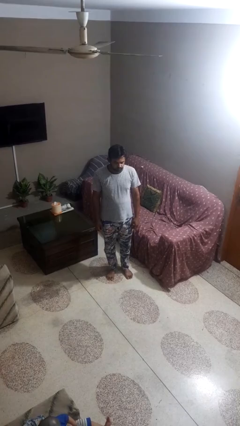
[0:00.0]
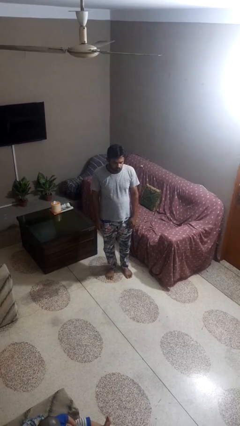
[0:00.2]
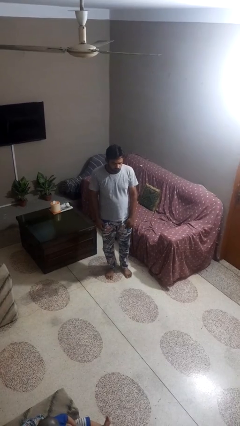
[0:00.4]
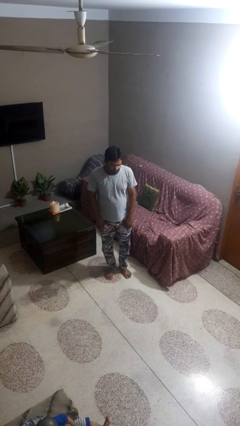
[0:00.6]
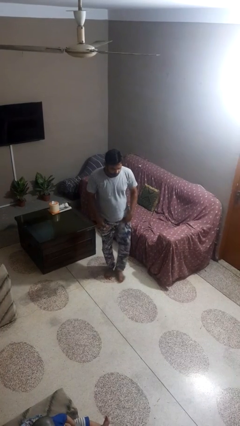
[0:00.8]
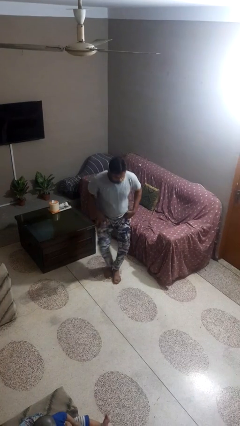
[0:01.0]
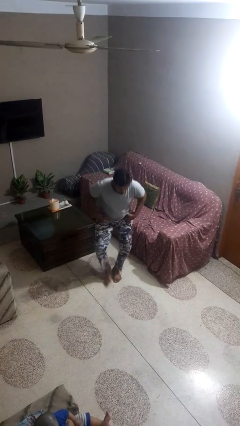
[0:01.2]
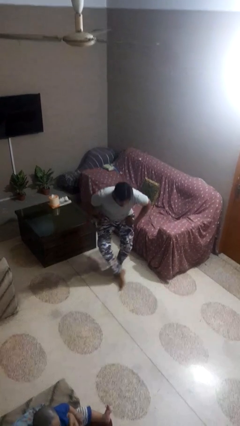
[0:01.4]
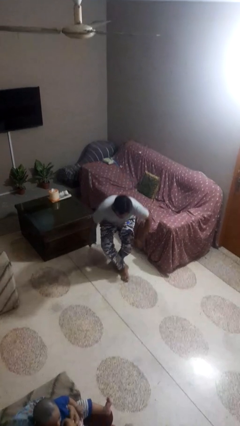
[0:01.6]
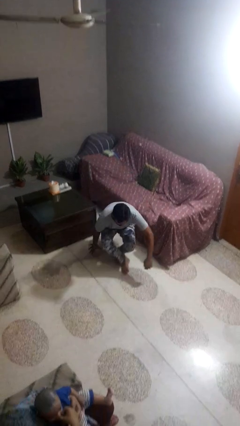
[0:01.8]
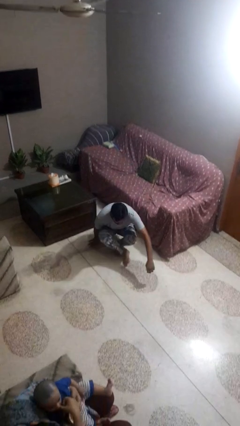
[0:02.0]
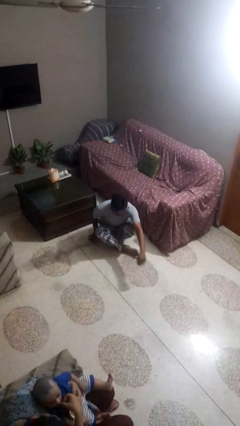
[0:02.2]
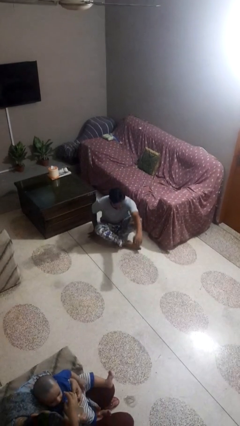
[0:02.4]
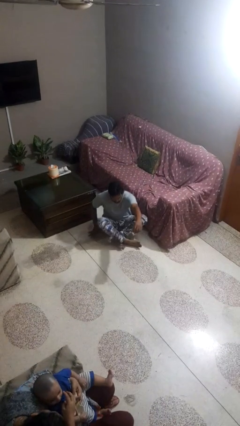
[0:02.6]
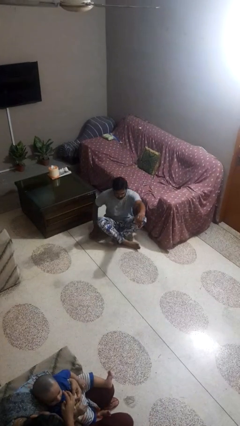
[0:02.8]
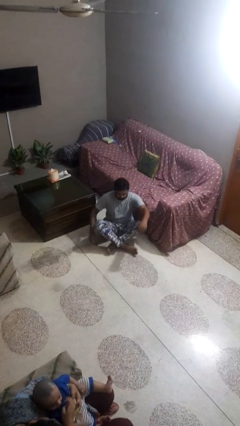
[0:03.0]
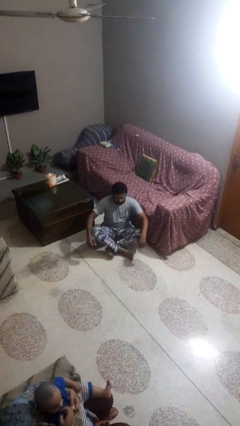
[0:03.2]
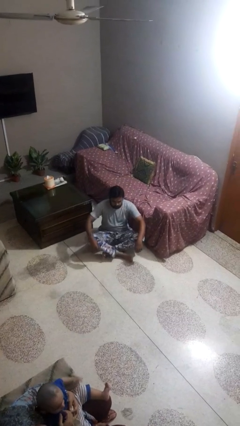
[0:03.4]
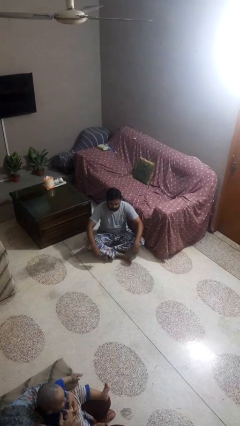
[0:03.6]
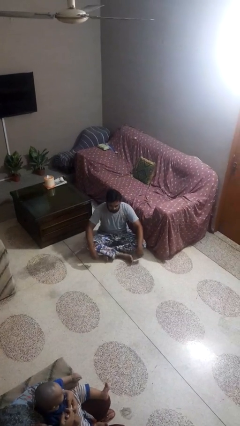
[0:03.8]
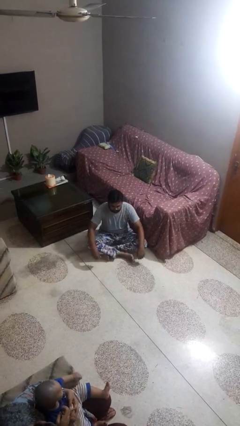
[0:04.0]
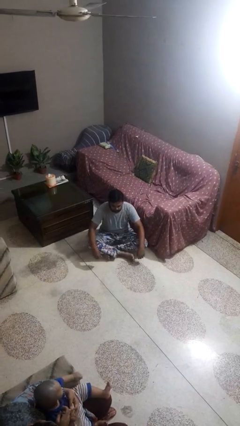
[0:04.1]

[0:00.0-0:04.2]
person sits crisscross

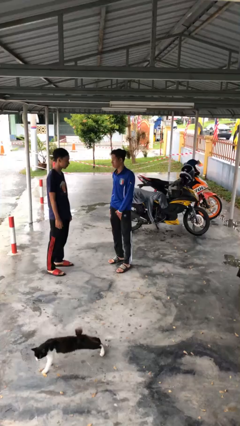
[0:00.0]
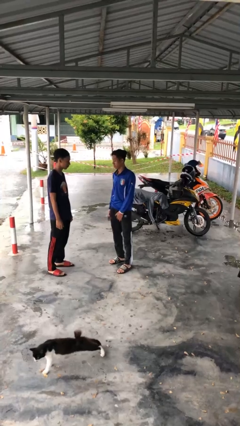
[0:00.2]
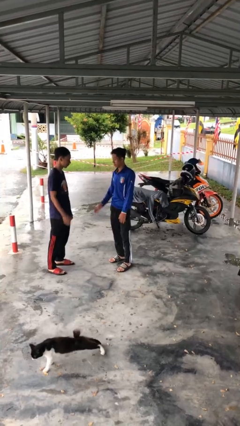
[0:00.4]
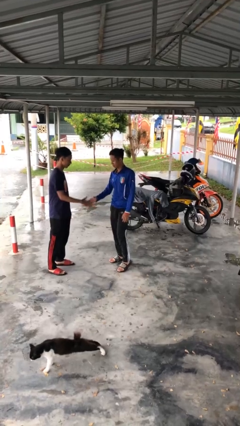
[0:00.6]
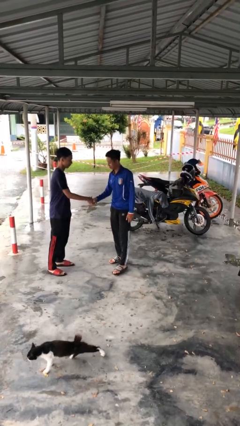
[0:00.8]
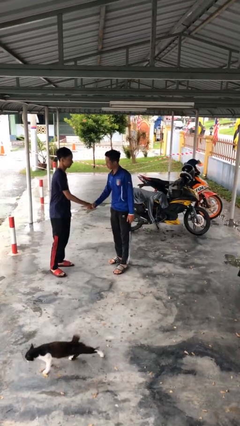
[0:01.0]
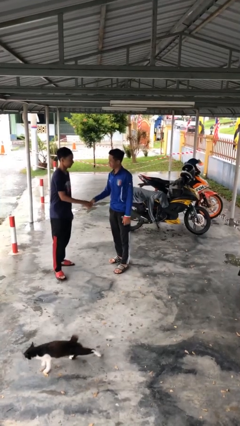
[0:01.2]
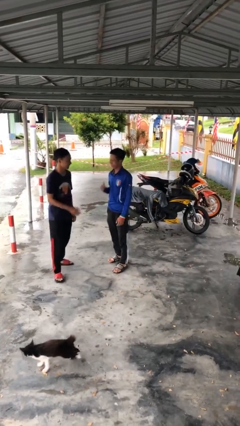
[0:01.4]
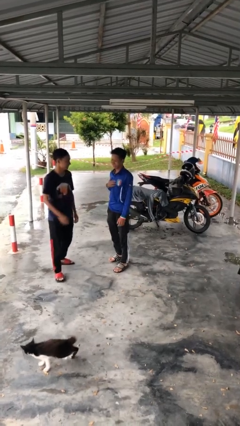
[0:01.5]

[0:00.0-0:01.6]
person shakes hand

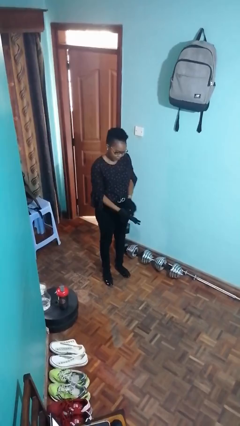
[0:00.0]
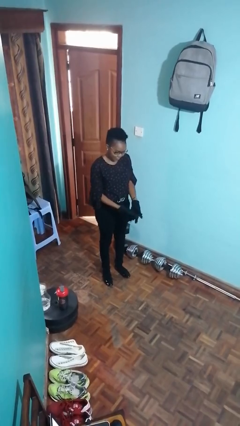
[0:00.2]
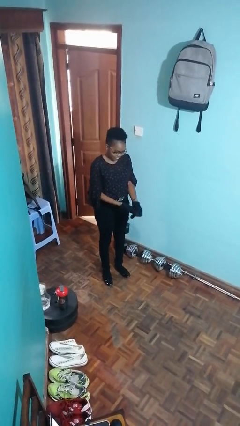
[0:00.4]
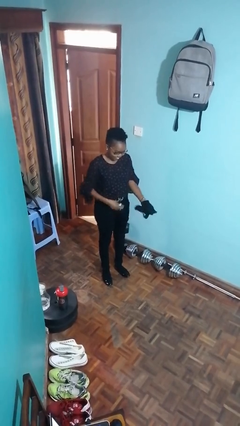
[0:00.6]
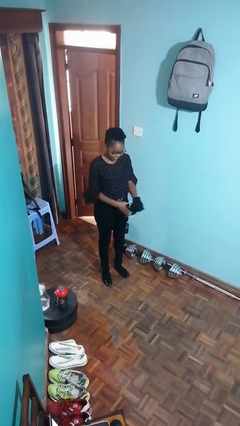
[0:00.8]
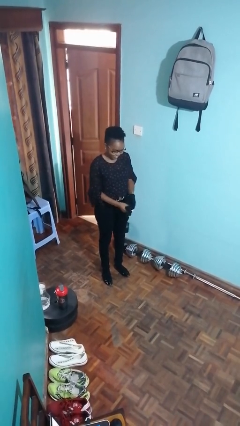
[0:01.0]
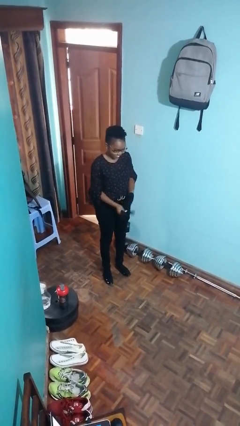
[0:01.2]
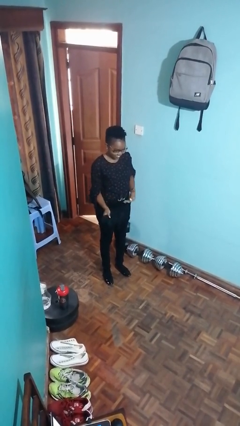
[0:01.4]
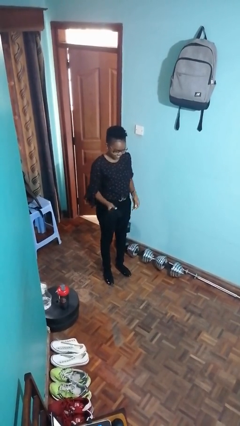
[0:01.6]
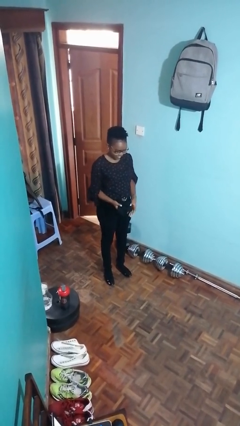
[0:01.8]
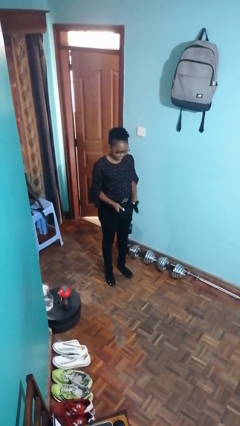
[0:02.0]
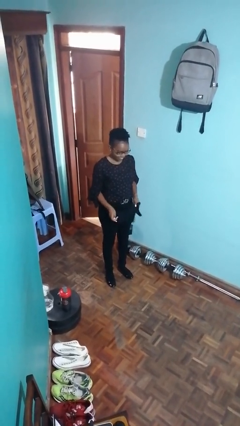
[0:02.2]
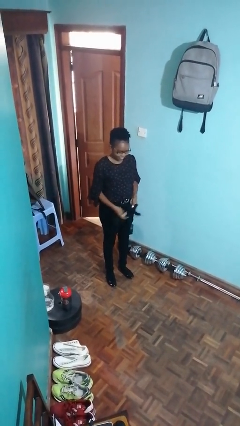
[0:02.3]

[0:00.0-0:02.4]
person takes off gloves

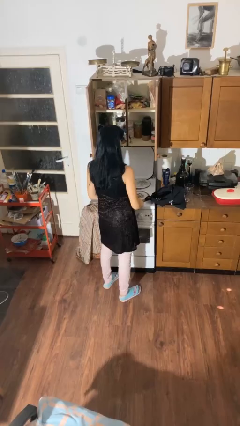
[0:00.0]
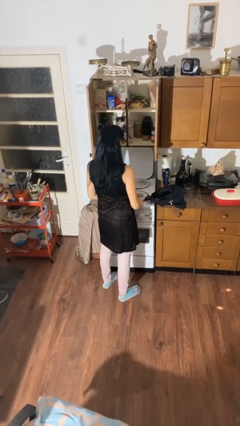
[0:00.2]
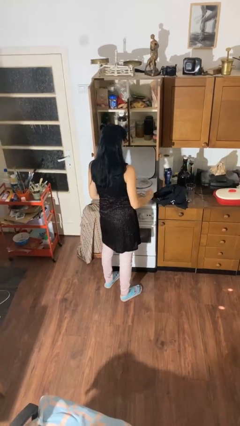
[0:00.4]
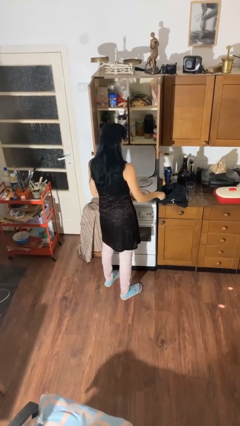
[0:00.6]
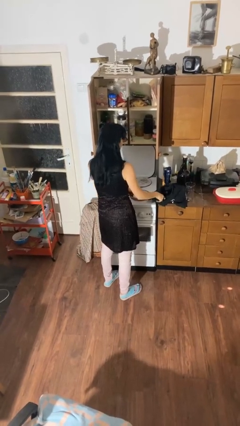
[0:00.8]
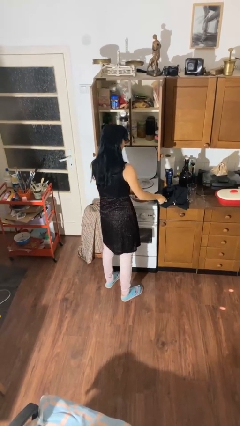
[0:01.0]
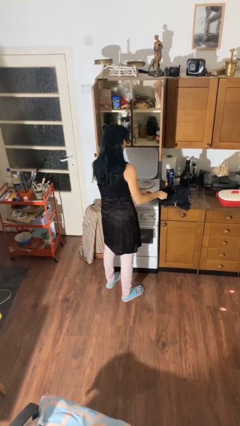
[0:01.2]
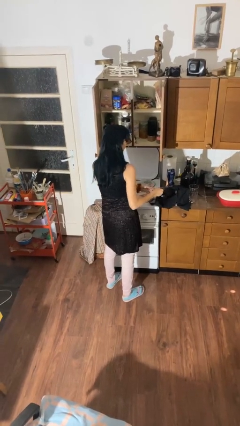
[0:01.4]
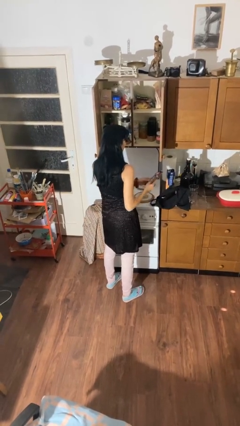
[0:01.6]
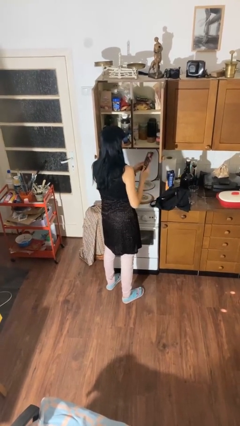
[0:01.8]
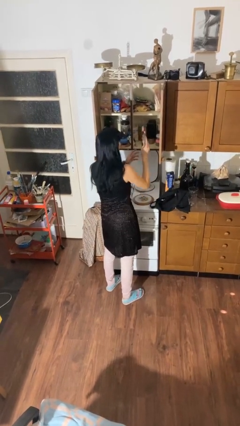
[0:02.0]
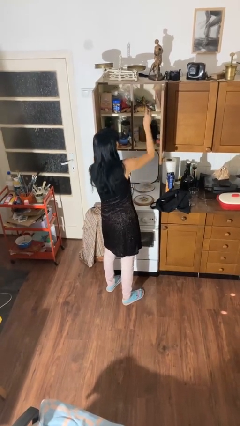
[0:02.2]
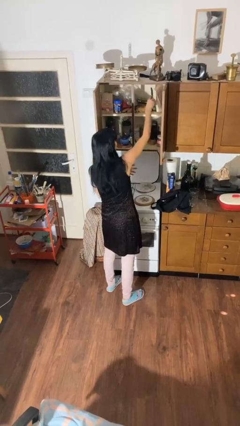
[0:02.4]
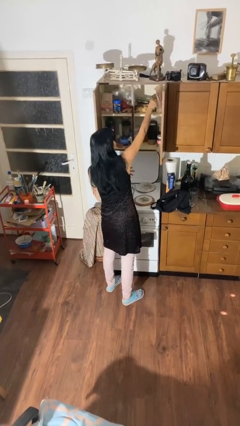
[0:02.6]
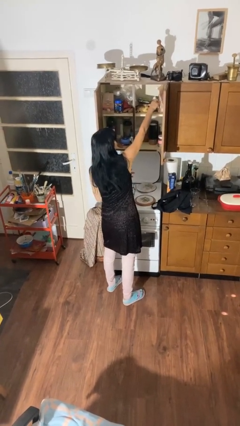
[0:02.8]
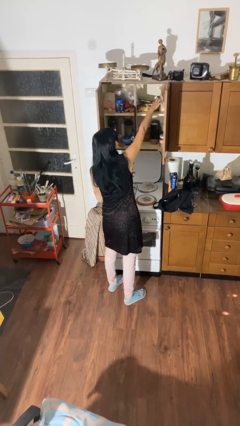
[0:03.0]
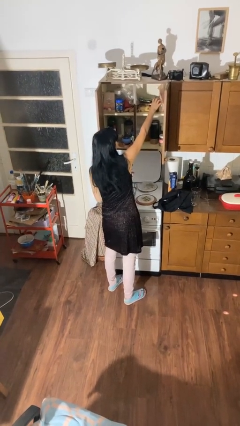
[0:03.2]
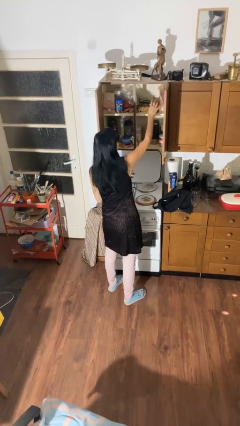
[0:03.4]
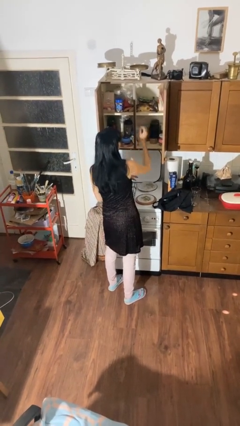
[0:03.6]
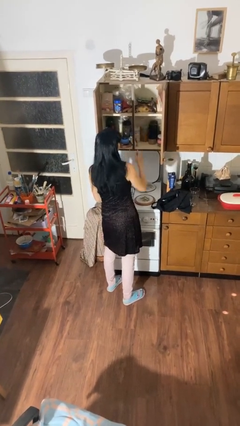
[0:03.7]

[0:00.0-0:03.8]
person loads groceries into cabinet

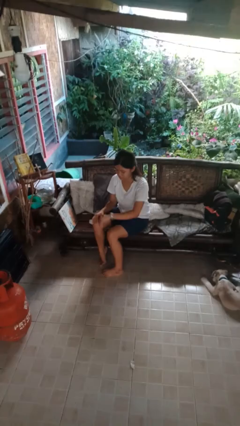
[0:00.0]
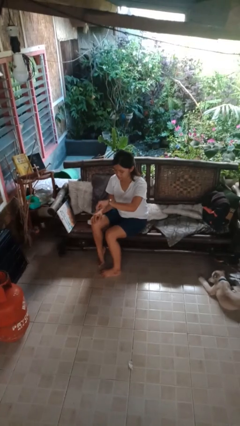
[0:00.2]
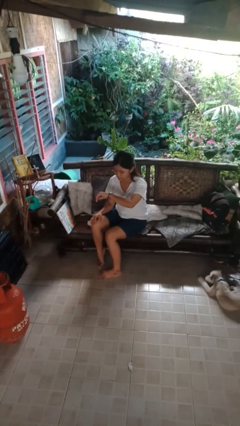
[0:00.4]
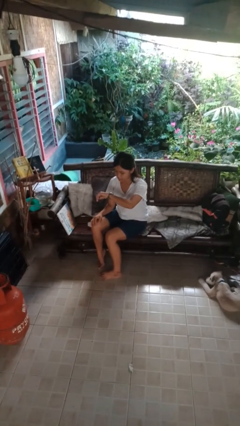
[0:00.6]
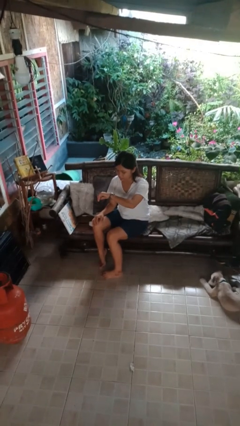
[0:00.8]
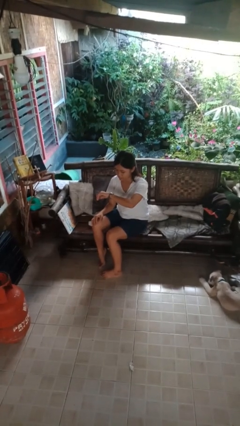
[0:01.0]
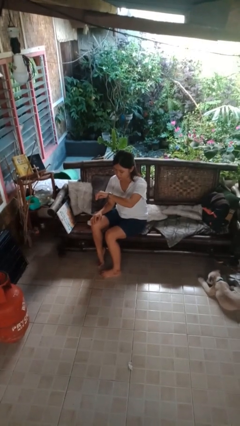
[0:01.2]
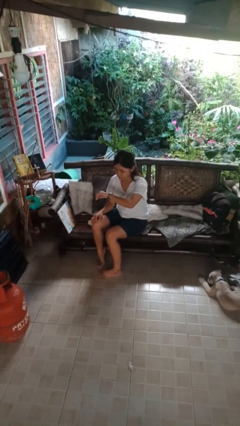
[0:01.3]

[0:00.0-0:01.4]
person looks at wristwatch

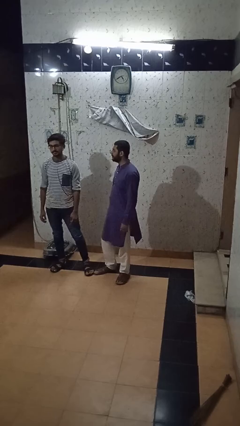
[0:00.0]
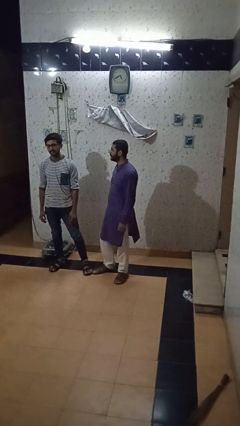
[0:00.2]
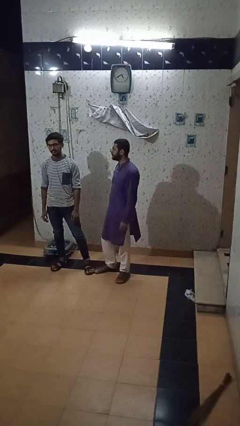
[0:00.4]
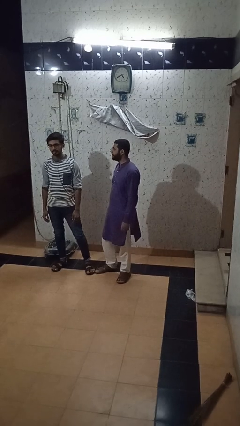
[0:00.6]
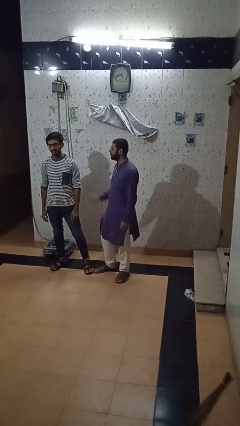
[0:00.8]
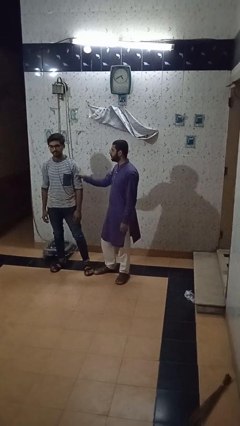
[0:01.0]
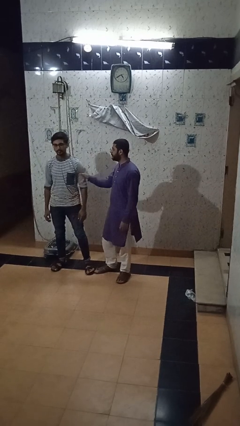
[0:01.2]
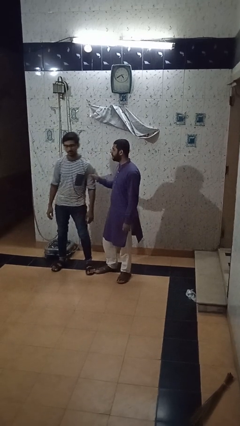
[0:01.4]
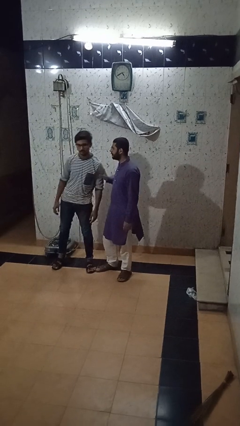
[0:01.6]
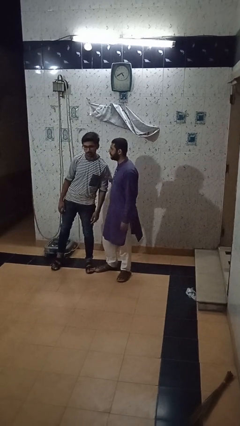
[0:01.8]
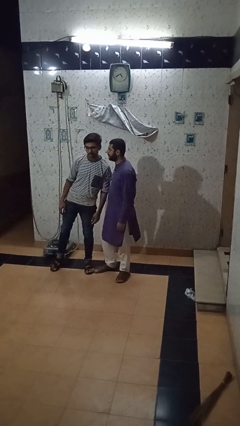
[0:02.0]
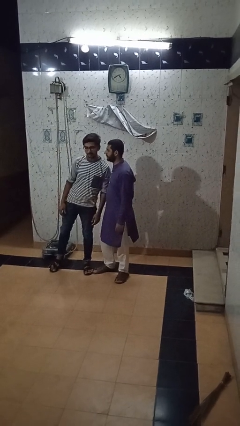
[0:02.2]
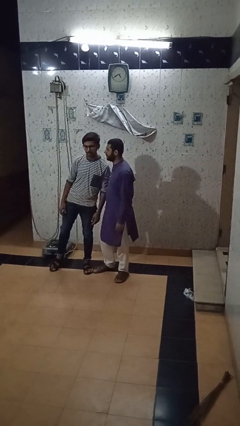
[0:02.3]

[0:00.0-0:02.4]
person grabs person by bicep

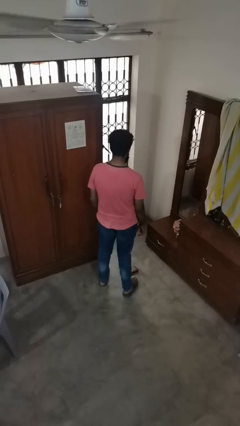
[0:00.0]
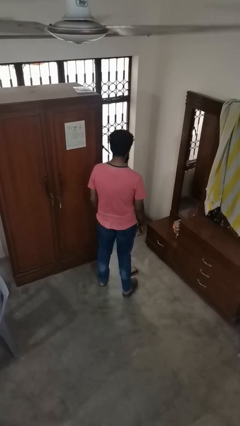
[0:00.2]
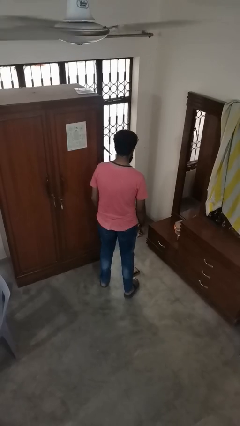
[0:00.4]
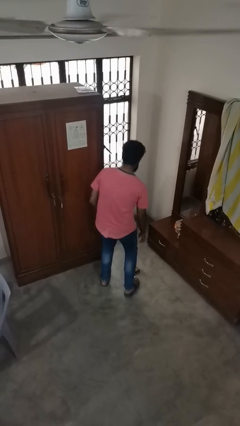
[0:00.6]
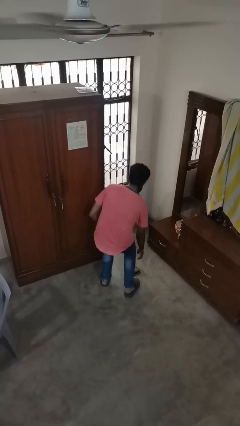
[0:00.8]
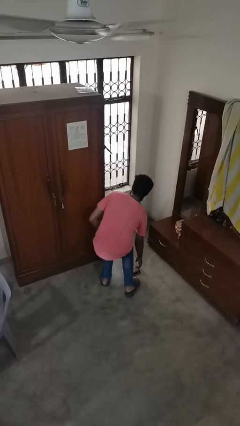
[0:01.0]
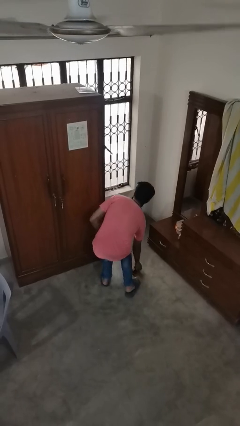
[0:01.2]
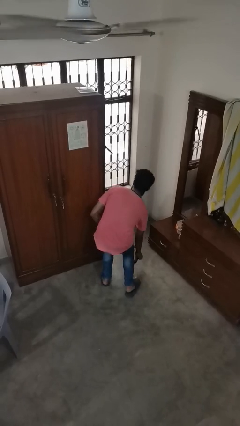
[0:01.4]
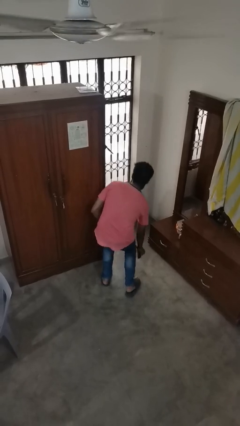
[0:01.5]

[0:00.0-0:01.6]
person picks up object from floor
